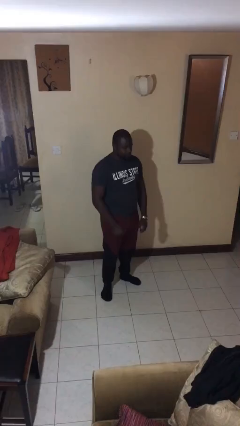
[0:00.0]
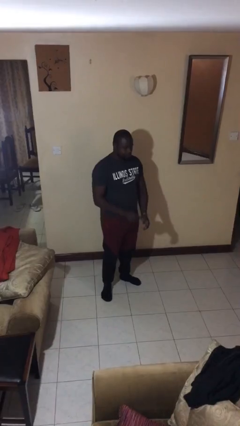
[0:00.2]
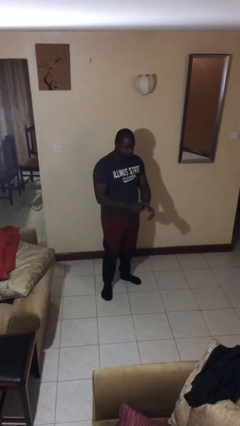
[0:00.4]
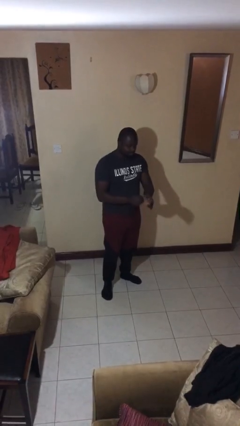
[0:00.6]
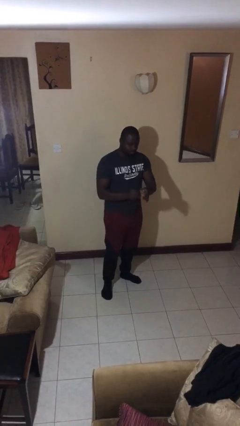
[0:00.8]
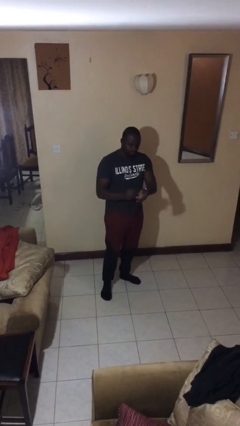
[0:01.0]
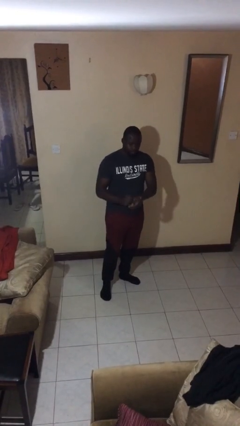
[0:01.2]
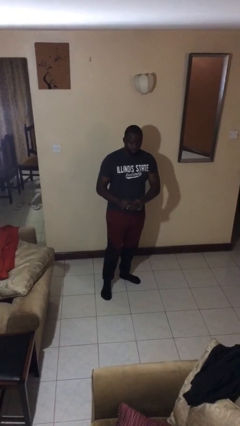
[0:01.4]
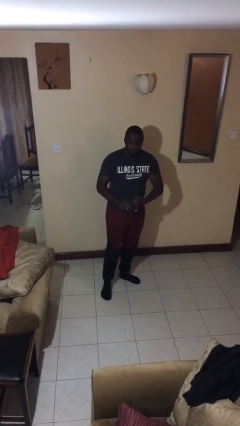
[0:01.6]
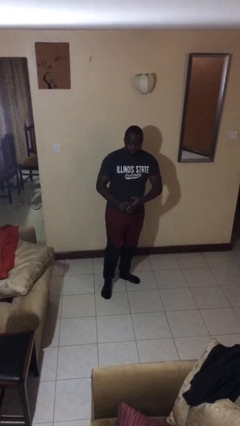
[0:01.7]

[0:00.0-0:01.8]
person takes off wristwatch

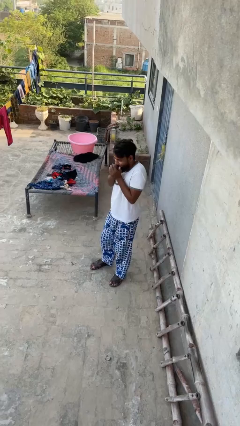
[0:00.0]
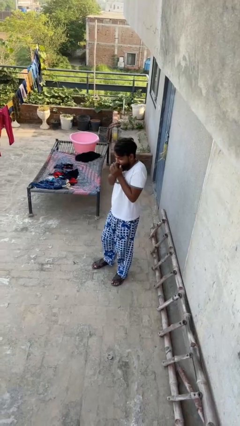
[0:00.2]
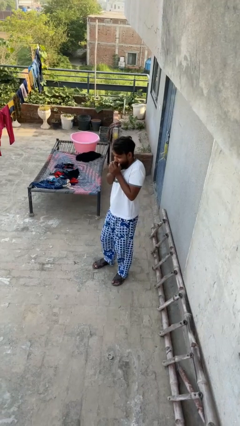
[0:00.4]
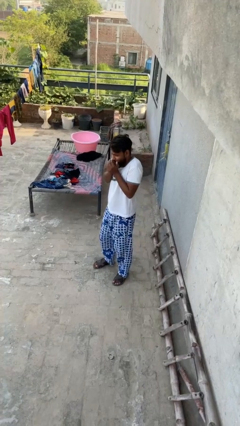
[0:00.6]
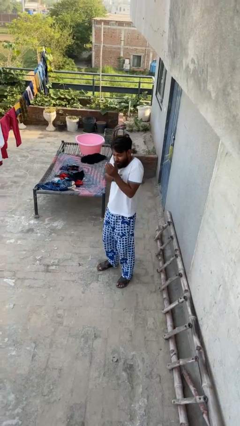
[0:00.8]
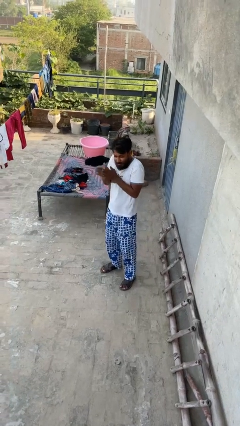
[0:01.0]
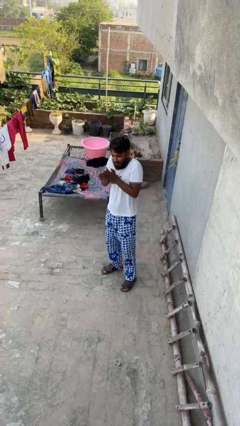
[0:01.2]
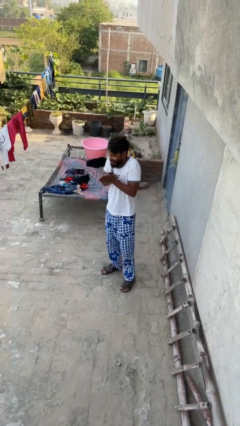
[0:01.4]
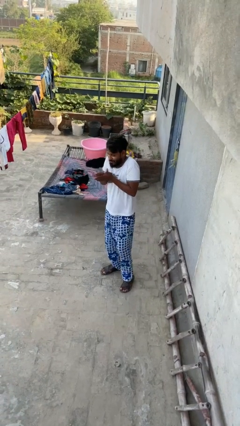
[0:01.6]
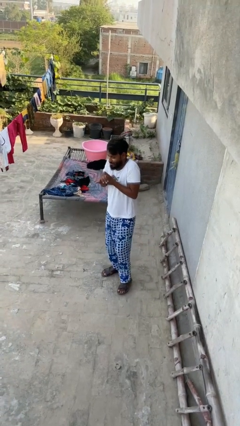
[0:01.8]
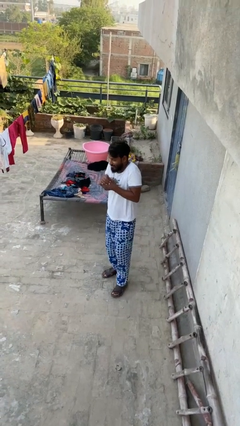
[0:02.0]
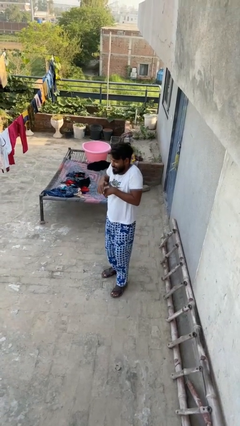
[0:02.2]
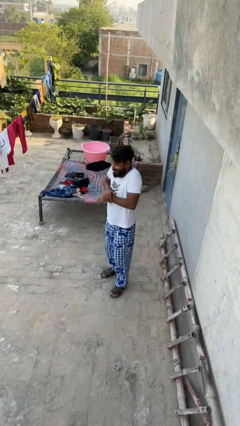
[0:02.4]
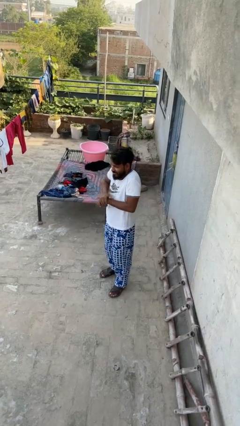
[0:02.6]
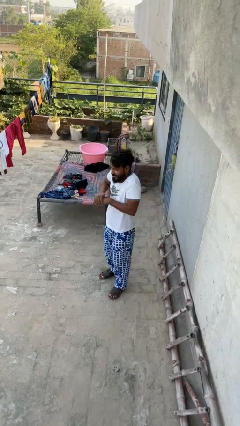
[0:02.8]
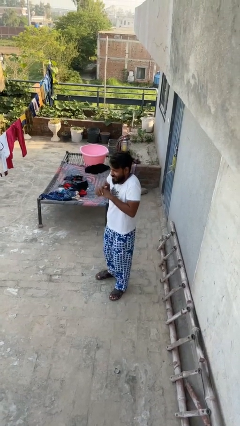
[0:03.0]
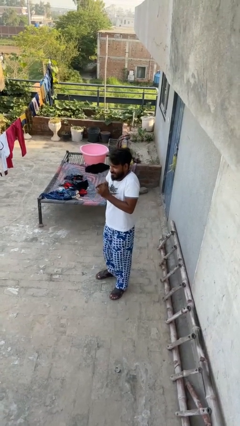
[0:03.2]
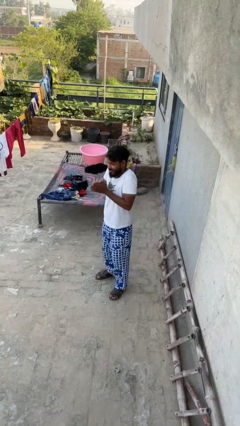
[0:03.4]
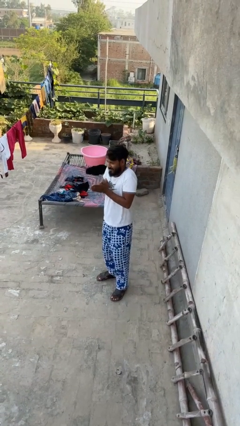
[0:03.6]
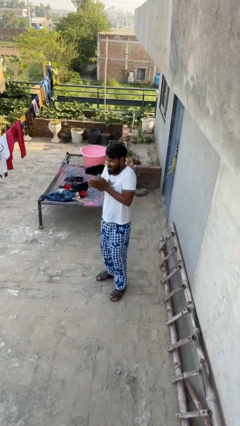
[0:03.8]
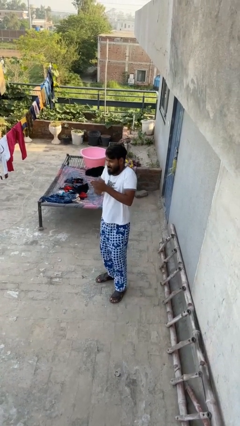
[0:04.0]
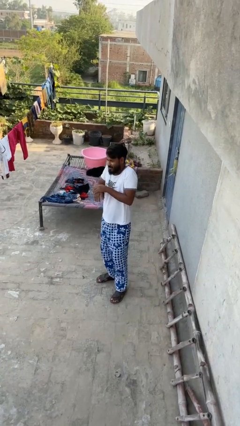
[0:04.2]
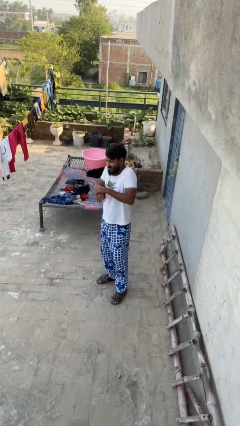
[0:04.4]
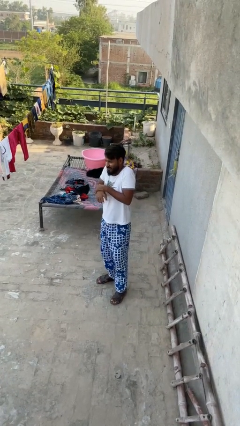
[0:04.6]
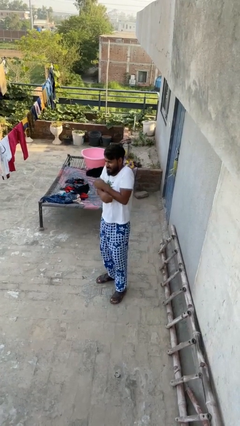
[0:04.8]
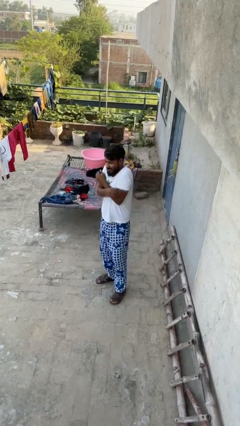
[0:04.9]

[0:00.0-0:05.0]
person blows into hands

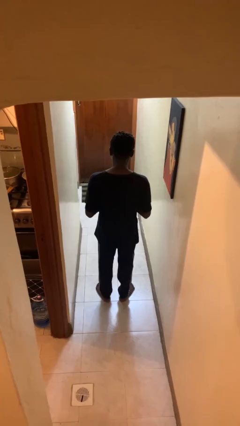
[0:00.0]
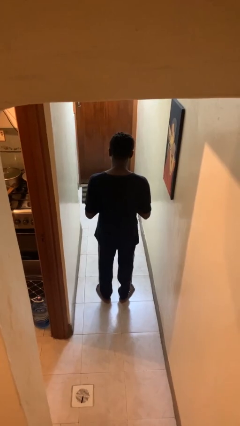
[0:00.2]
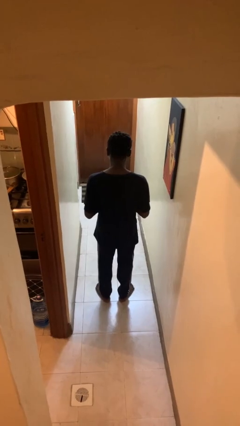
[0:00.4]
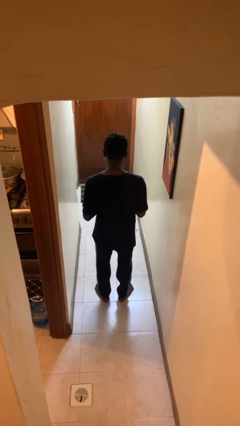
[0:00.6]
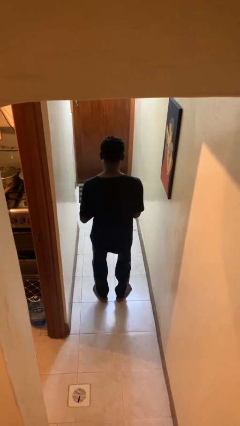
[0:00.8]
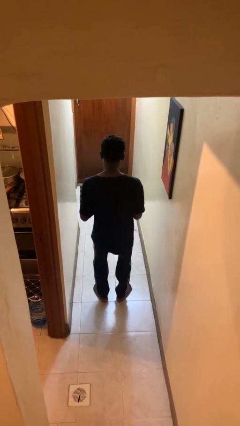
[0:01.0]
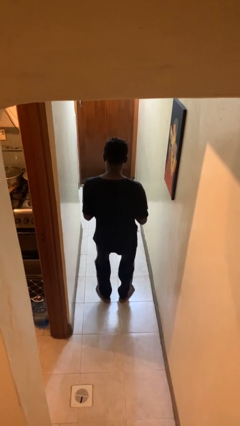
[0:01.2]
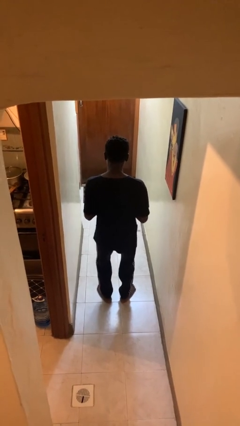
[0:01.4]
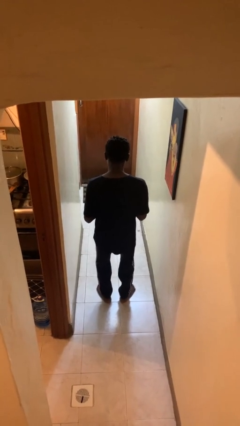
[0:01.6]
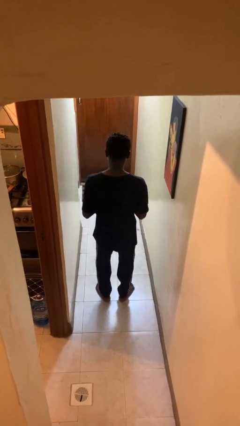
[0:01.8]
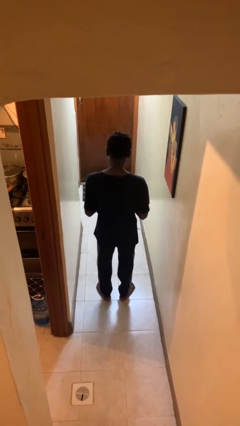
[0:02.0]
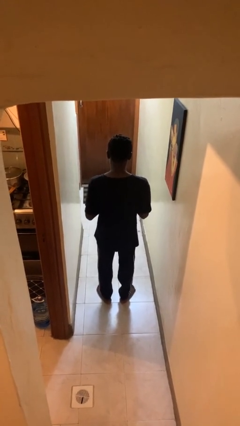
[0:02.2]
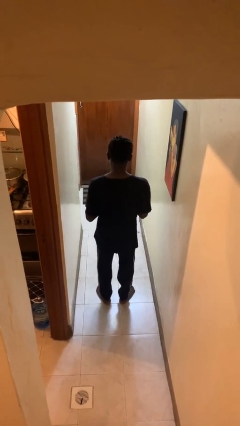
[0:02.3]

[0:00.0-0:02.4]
person dances in place

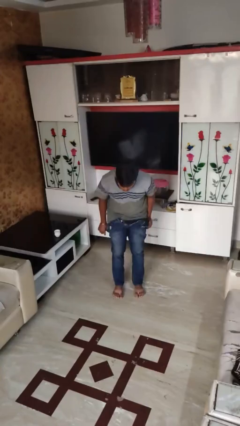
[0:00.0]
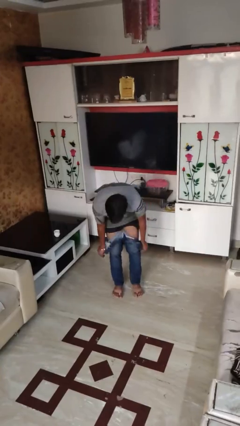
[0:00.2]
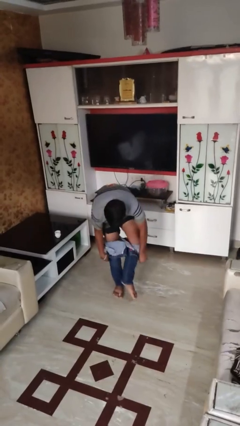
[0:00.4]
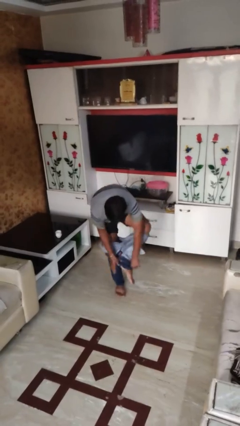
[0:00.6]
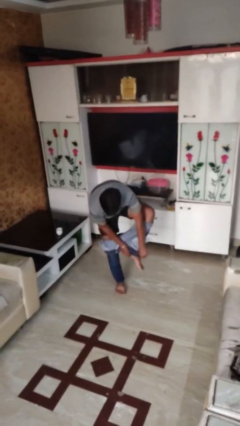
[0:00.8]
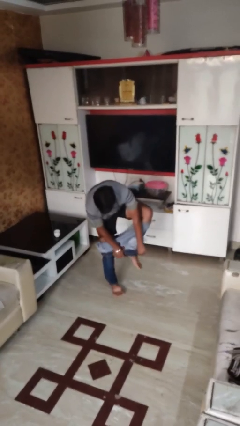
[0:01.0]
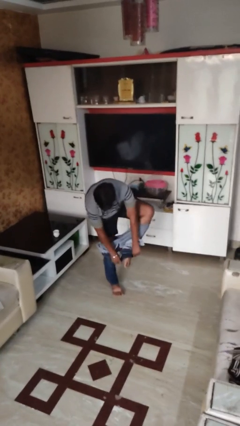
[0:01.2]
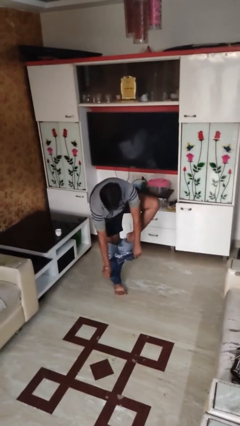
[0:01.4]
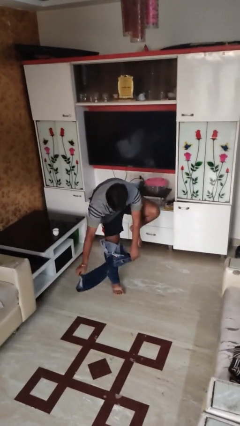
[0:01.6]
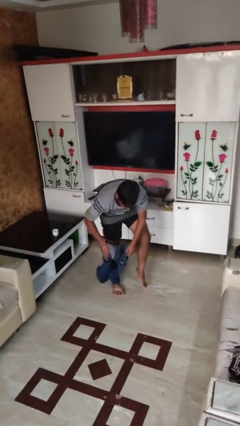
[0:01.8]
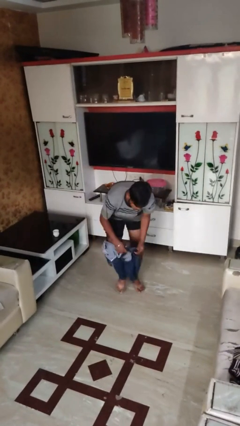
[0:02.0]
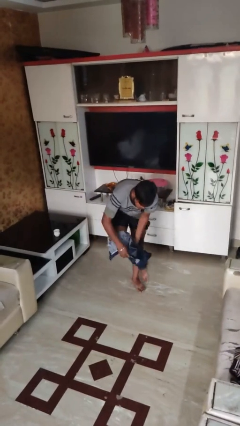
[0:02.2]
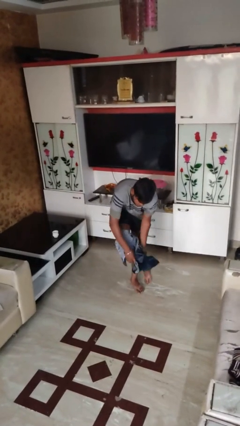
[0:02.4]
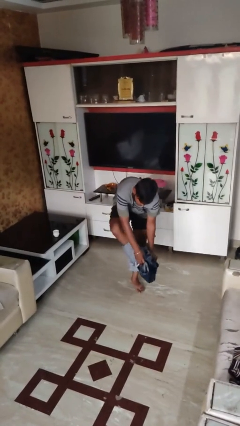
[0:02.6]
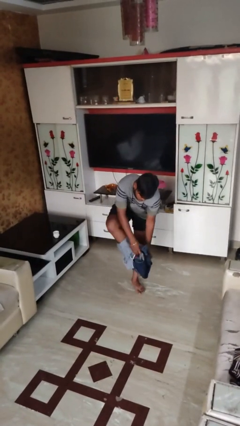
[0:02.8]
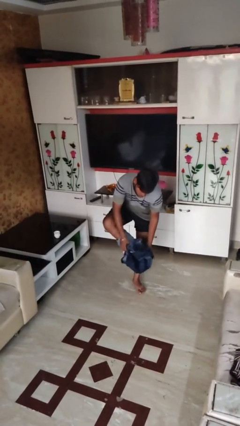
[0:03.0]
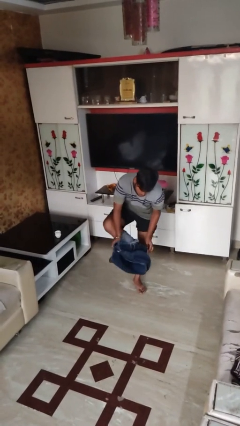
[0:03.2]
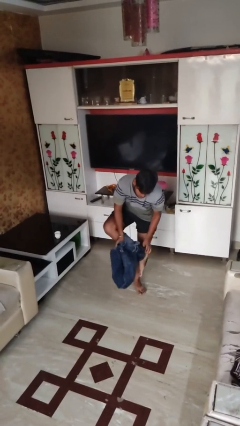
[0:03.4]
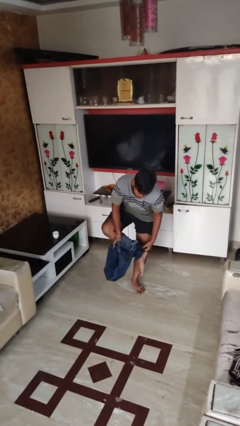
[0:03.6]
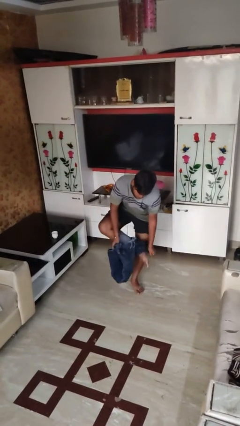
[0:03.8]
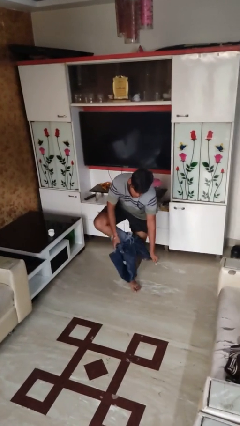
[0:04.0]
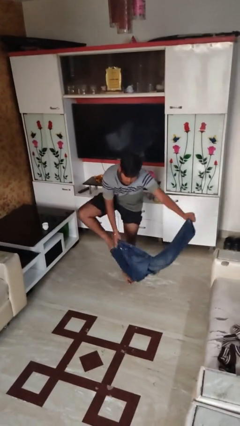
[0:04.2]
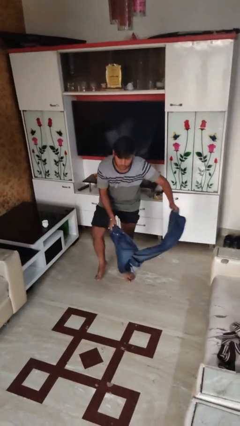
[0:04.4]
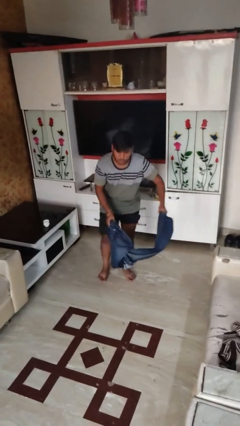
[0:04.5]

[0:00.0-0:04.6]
person takes off pants

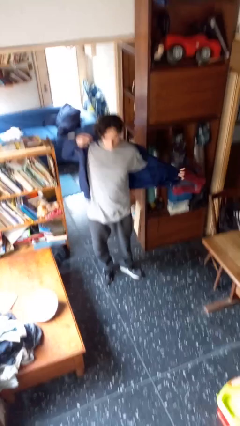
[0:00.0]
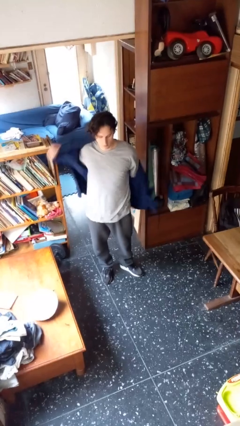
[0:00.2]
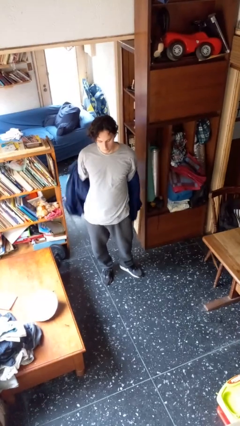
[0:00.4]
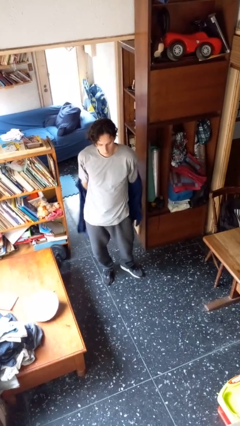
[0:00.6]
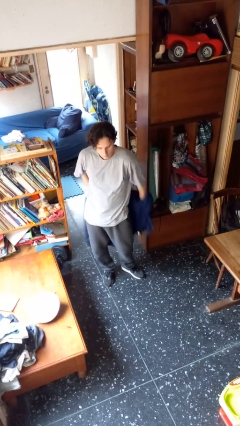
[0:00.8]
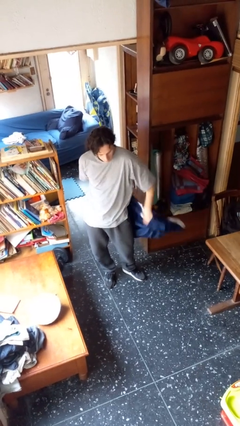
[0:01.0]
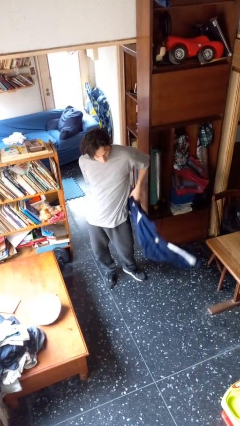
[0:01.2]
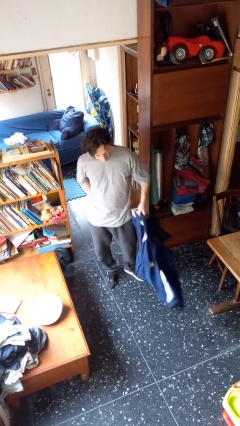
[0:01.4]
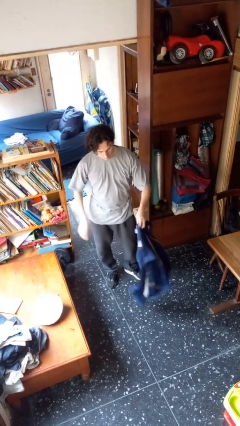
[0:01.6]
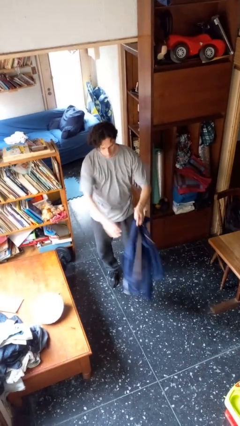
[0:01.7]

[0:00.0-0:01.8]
person takes off jacket

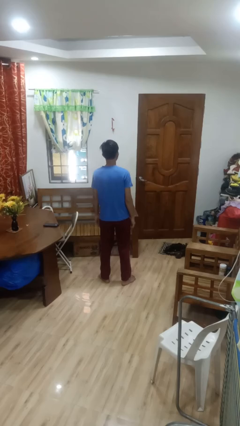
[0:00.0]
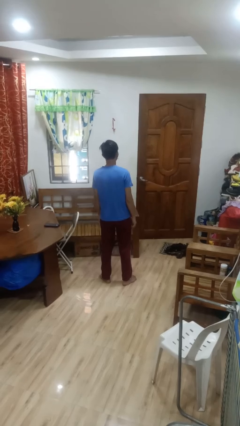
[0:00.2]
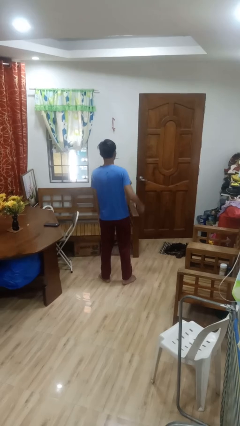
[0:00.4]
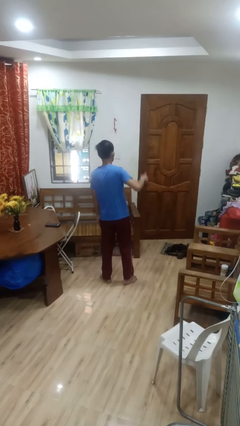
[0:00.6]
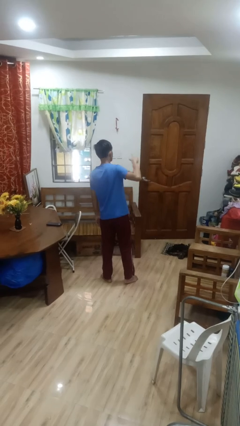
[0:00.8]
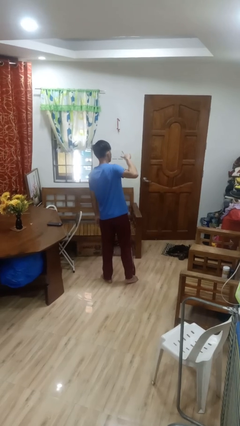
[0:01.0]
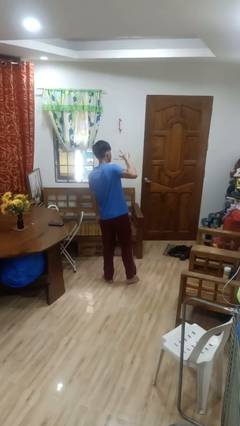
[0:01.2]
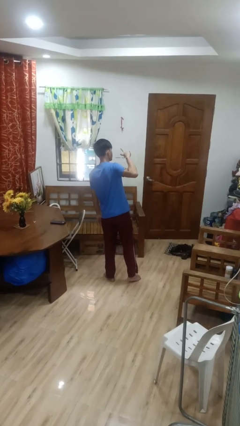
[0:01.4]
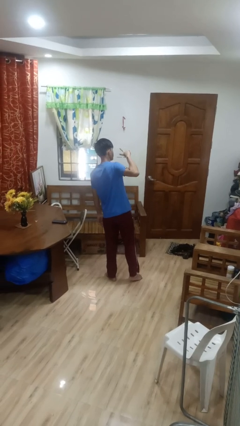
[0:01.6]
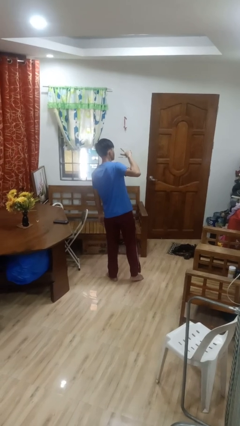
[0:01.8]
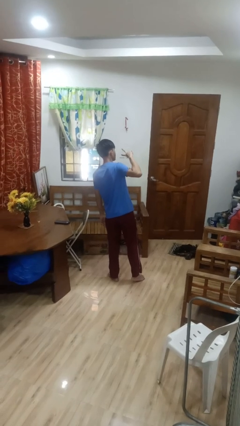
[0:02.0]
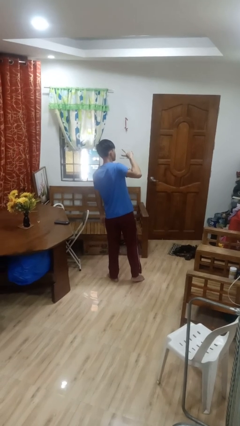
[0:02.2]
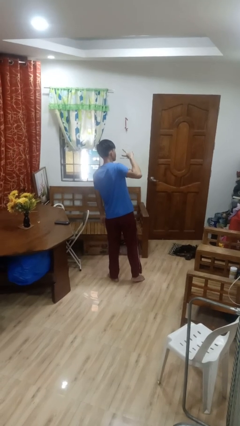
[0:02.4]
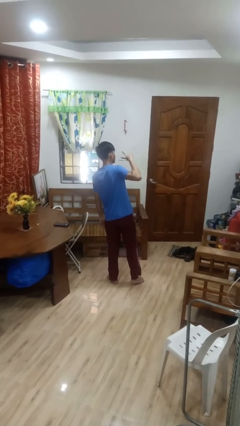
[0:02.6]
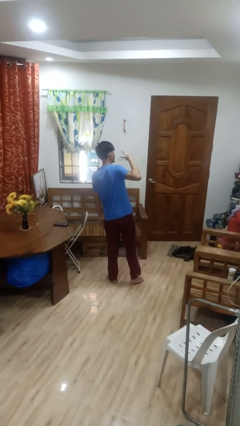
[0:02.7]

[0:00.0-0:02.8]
person gestures peace
